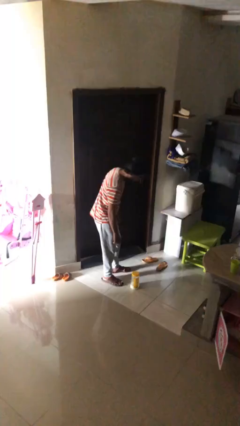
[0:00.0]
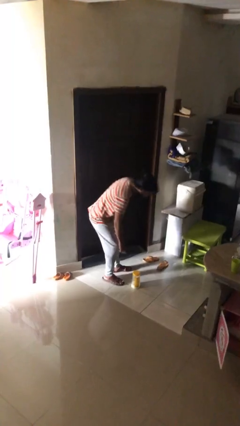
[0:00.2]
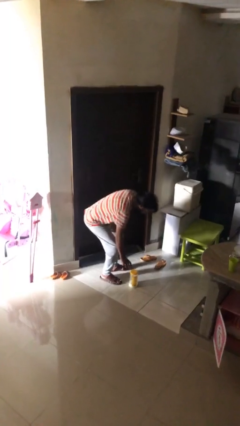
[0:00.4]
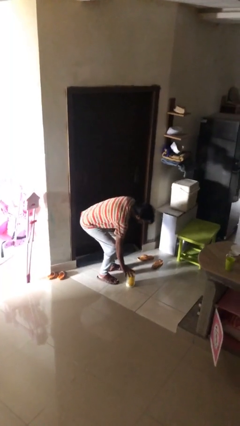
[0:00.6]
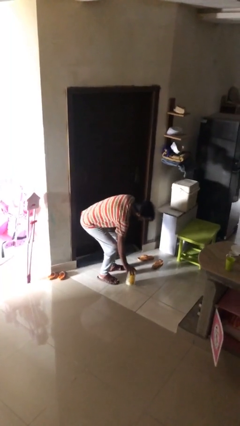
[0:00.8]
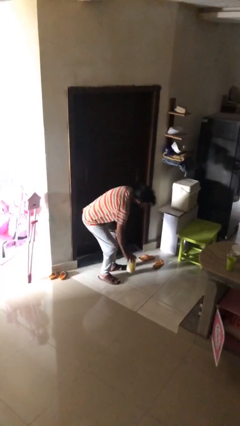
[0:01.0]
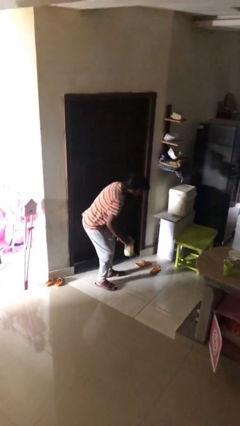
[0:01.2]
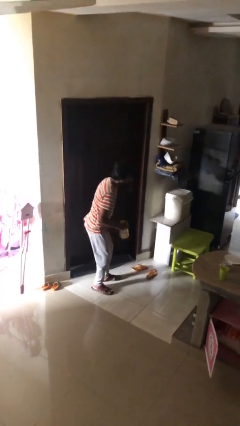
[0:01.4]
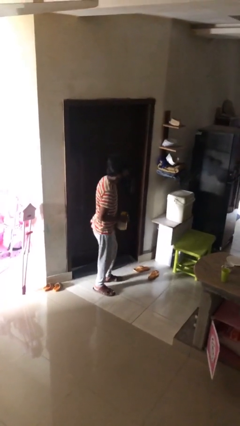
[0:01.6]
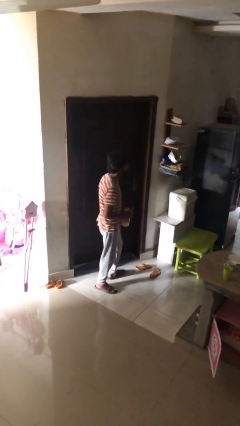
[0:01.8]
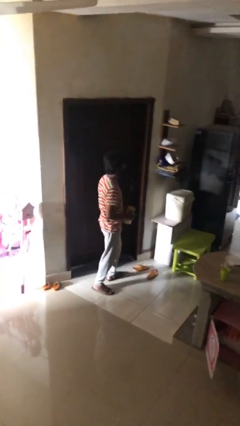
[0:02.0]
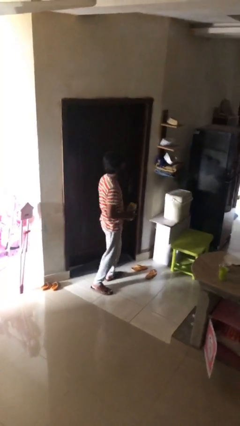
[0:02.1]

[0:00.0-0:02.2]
person picks up object from floor

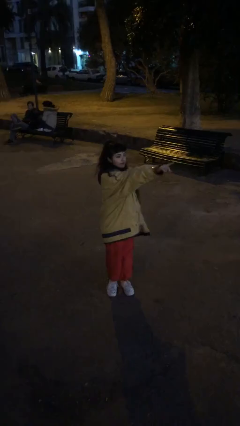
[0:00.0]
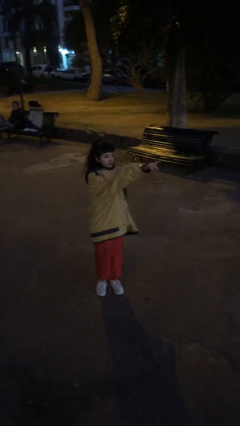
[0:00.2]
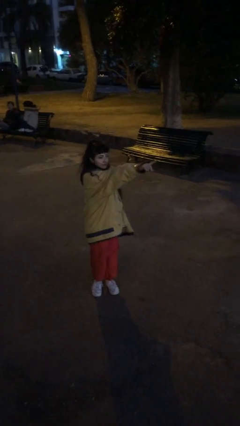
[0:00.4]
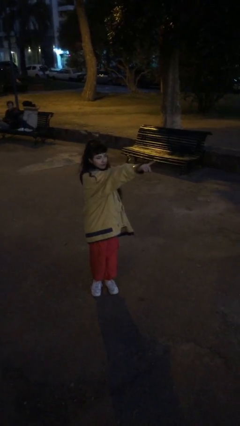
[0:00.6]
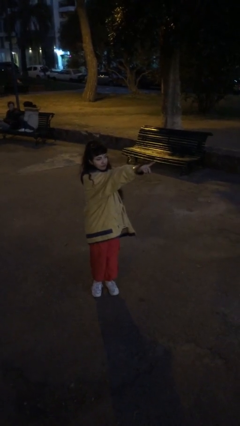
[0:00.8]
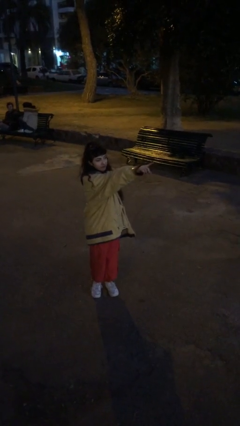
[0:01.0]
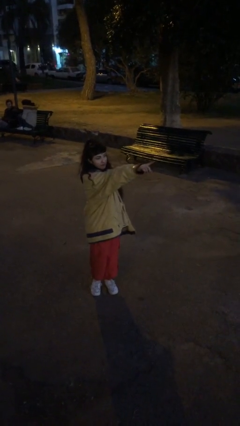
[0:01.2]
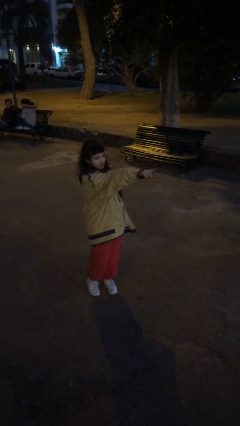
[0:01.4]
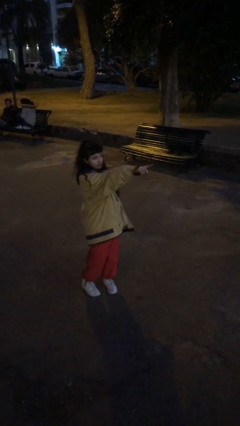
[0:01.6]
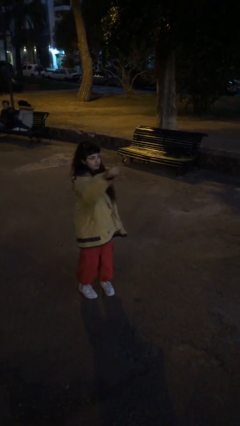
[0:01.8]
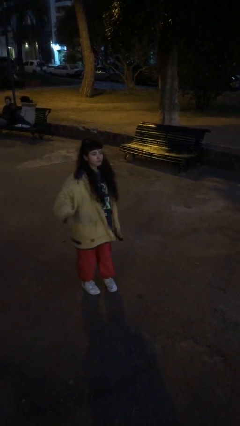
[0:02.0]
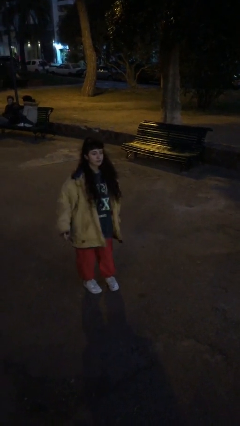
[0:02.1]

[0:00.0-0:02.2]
person points at person

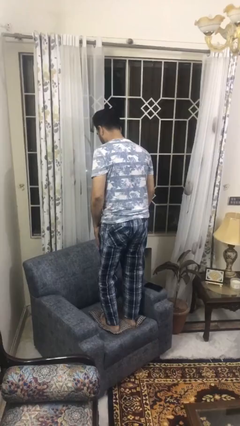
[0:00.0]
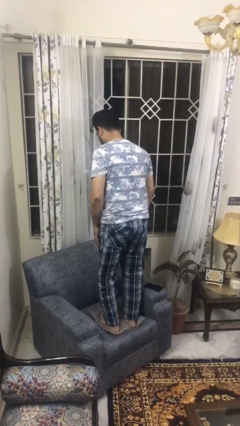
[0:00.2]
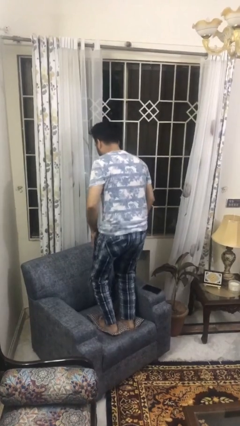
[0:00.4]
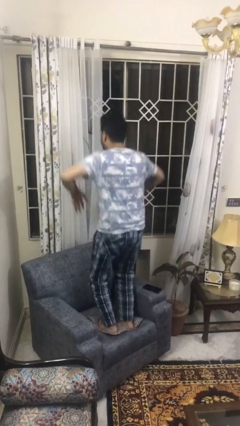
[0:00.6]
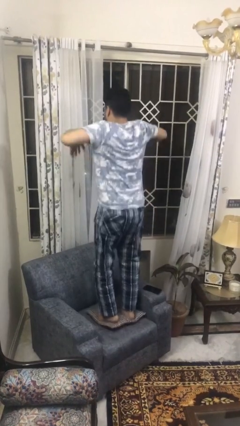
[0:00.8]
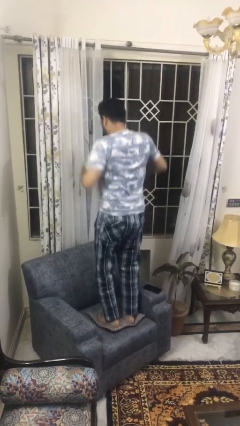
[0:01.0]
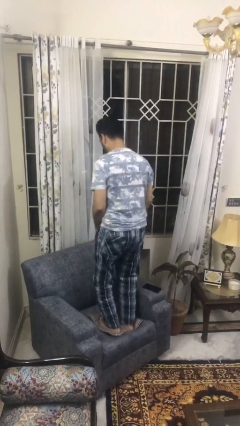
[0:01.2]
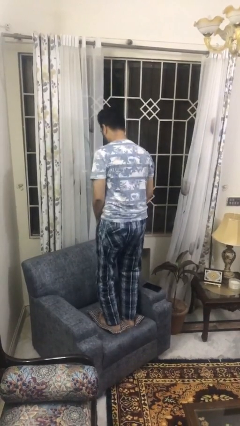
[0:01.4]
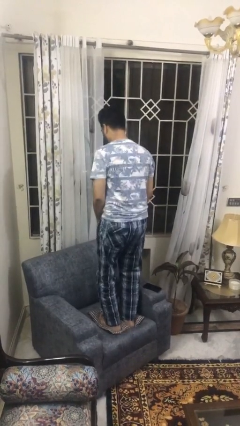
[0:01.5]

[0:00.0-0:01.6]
person jumps on couch

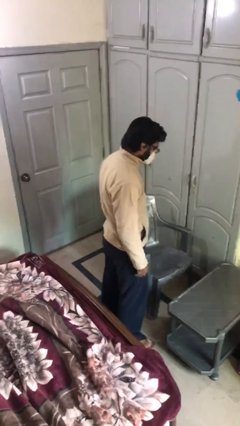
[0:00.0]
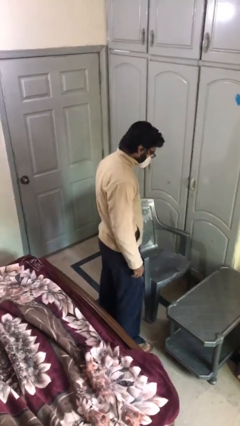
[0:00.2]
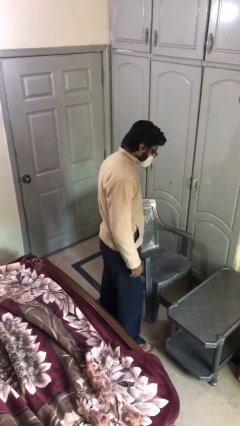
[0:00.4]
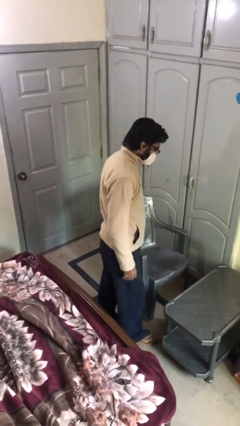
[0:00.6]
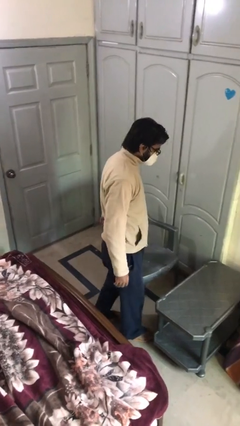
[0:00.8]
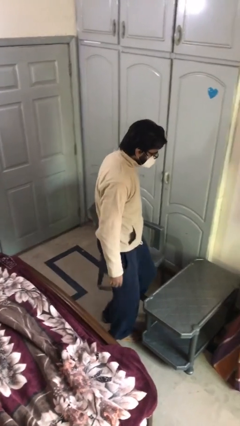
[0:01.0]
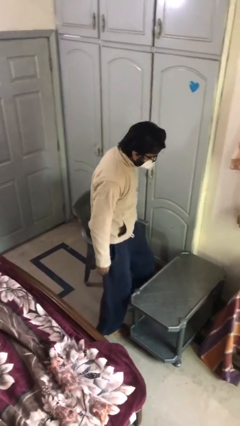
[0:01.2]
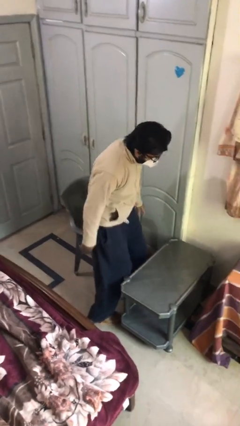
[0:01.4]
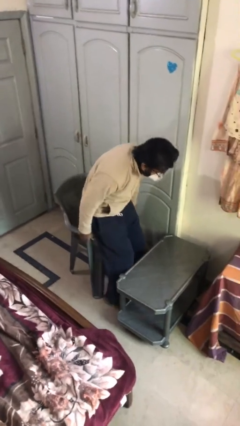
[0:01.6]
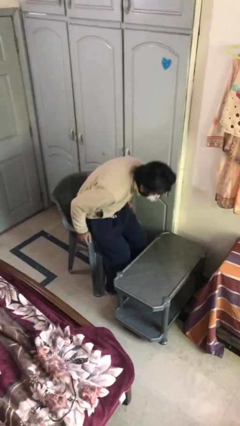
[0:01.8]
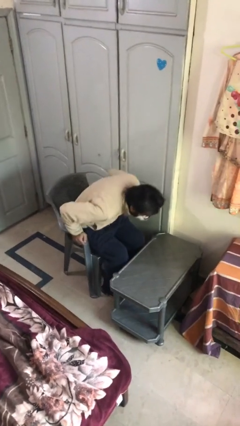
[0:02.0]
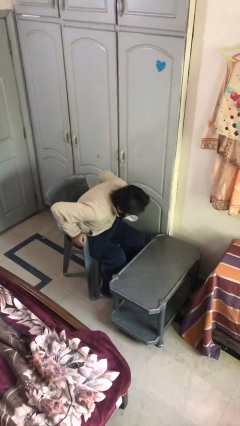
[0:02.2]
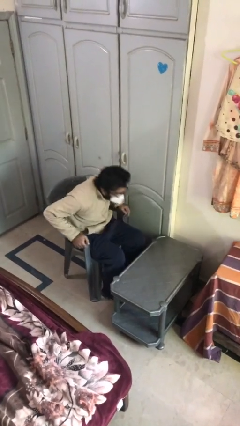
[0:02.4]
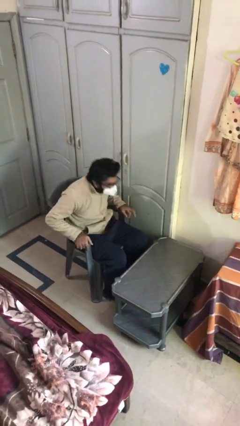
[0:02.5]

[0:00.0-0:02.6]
person sits down

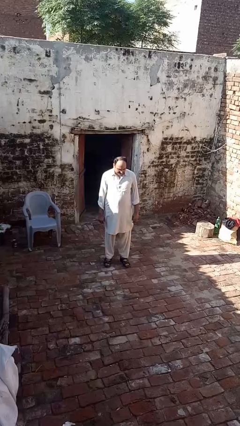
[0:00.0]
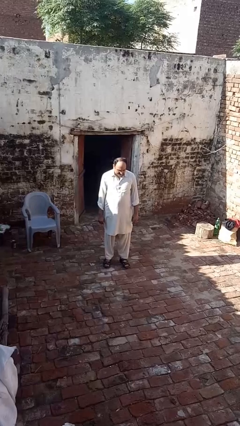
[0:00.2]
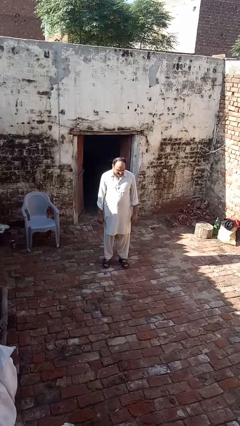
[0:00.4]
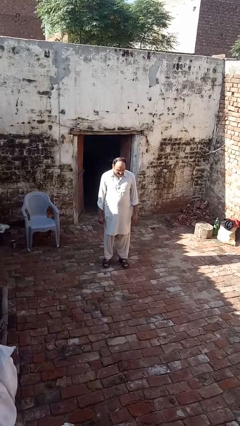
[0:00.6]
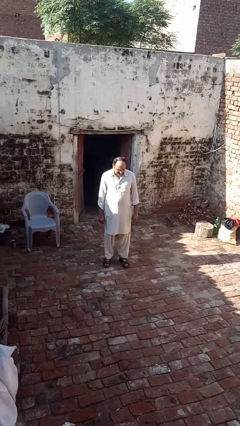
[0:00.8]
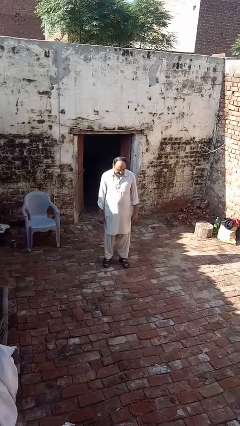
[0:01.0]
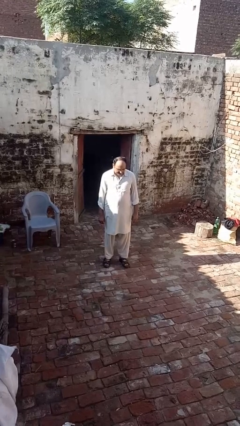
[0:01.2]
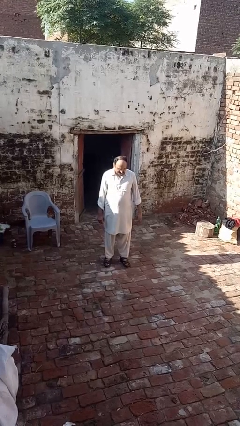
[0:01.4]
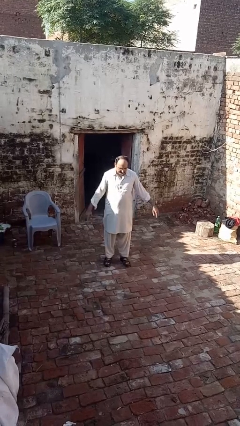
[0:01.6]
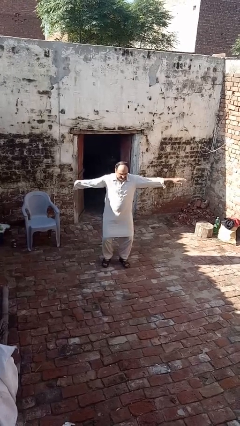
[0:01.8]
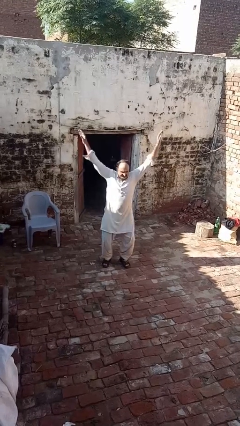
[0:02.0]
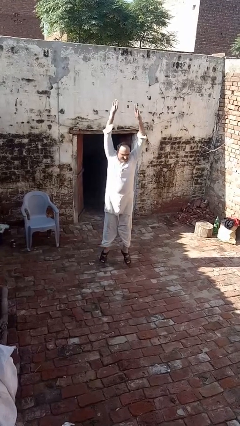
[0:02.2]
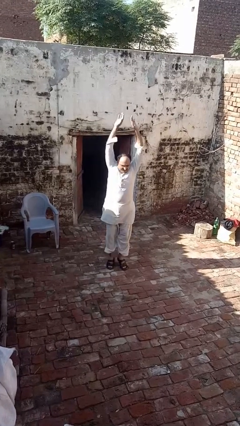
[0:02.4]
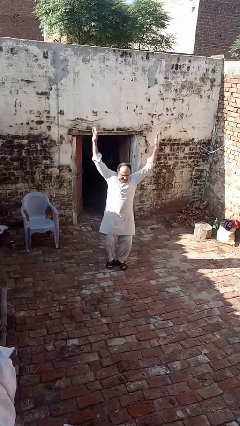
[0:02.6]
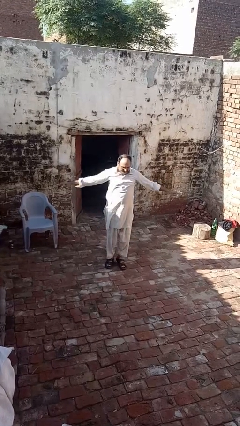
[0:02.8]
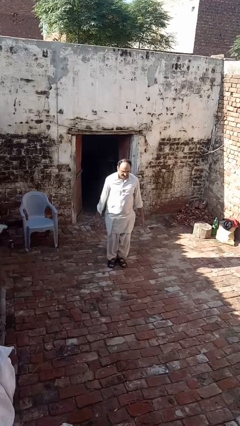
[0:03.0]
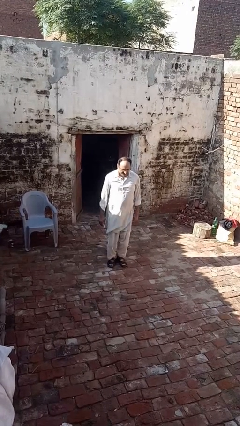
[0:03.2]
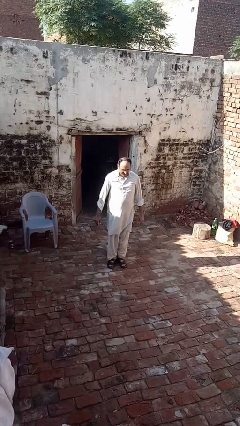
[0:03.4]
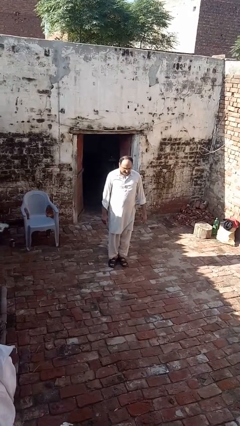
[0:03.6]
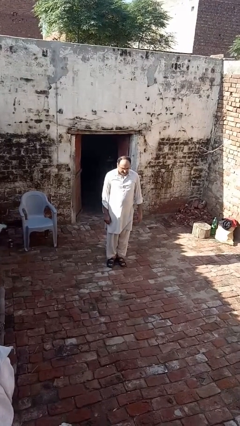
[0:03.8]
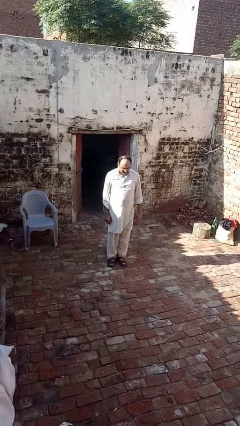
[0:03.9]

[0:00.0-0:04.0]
person exercises with jumping jacks

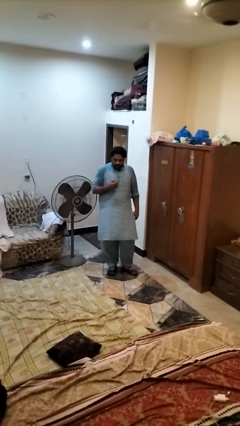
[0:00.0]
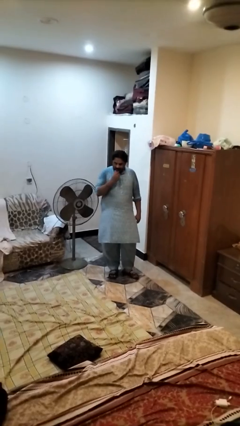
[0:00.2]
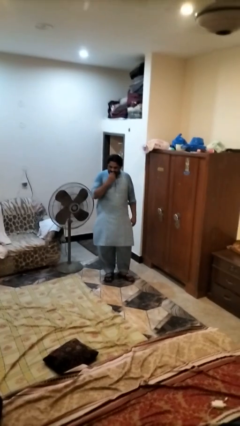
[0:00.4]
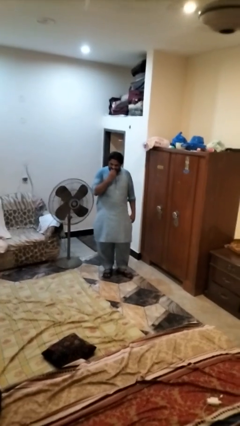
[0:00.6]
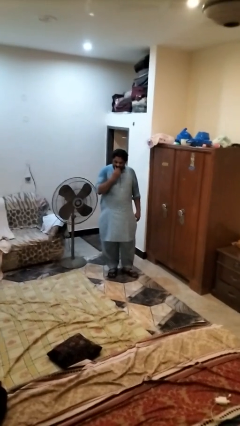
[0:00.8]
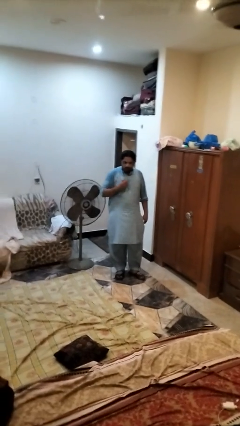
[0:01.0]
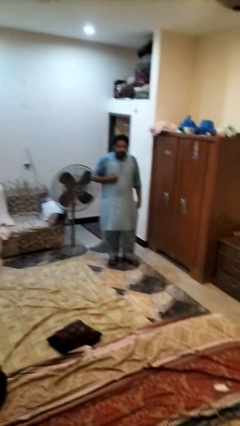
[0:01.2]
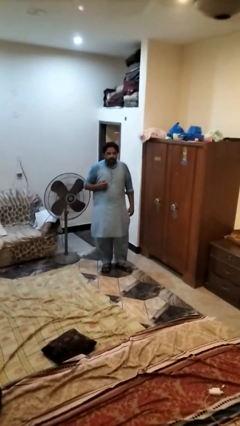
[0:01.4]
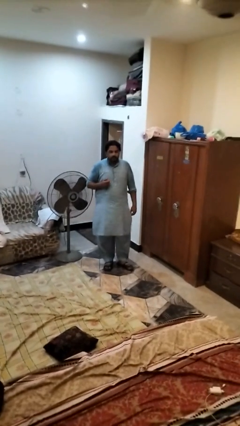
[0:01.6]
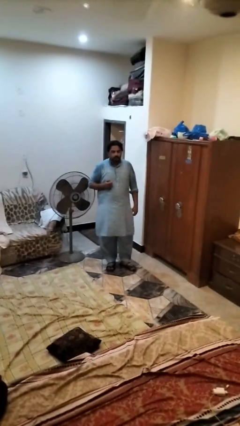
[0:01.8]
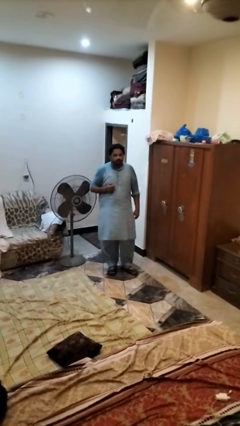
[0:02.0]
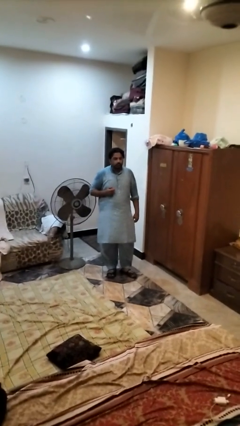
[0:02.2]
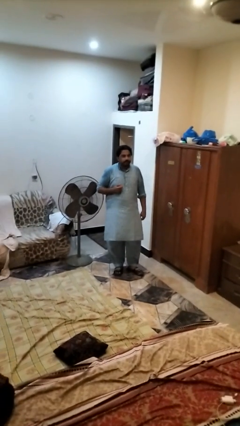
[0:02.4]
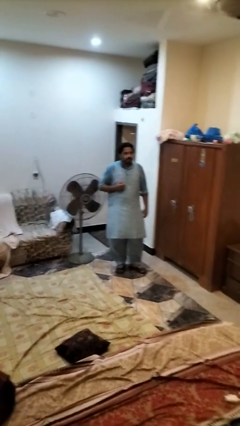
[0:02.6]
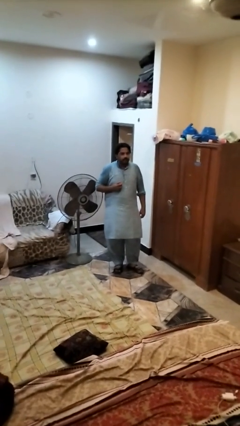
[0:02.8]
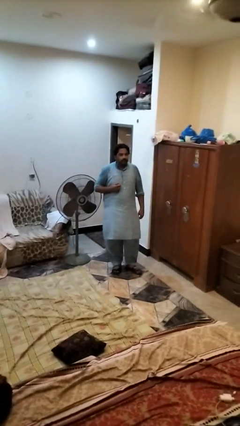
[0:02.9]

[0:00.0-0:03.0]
person eats apple

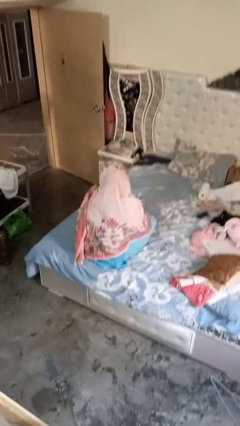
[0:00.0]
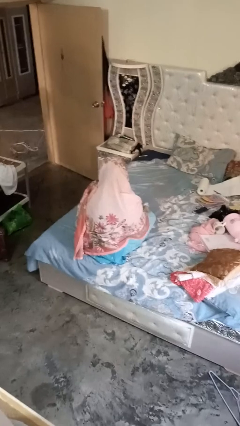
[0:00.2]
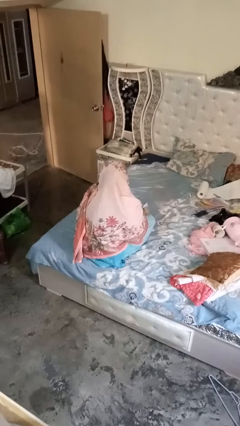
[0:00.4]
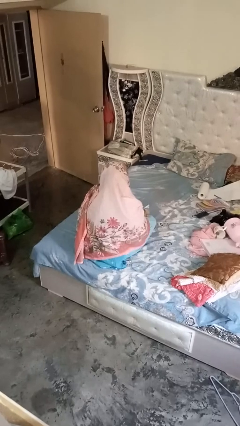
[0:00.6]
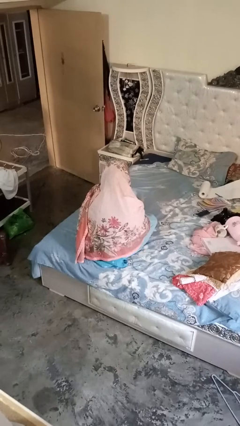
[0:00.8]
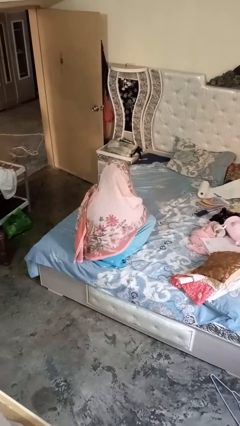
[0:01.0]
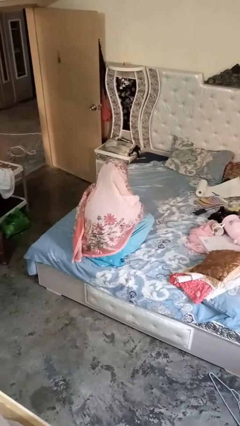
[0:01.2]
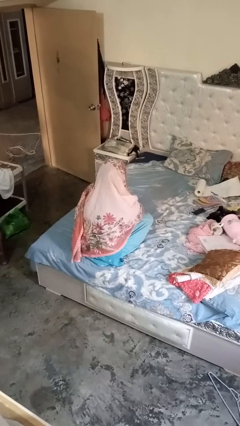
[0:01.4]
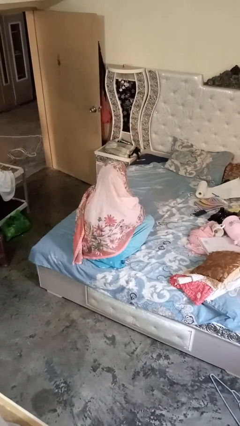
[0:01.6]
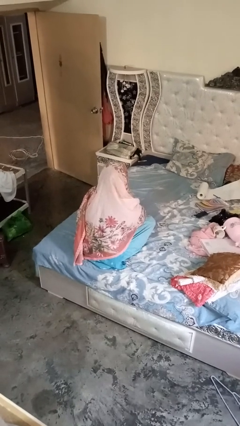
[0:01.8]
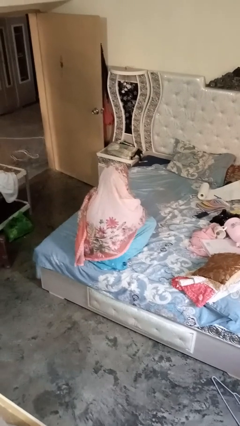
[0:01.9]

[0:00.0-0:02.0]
person blows nose
